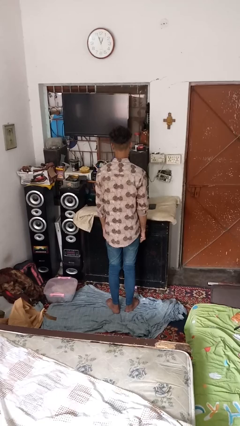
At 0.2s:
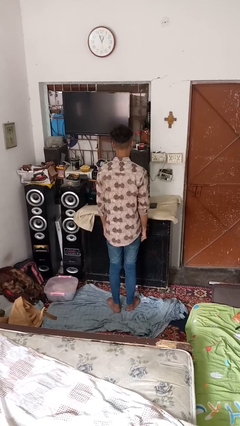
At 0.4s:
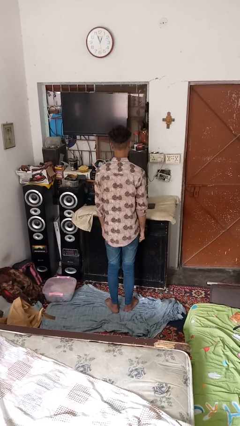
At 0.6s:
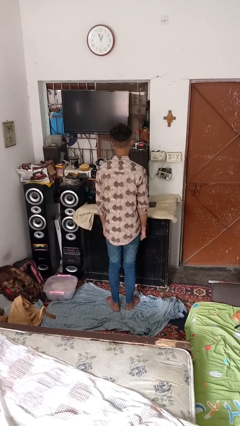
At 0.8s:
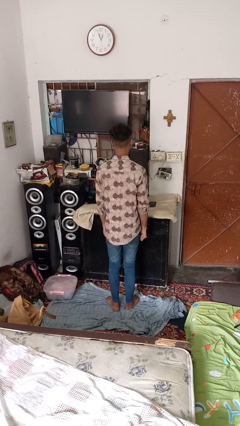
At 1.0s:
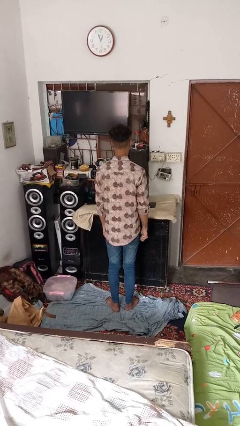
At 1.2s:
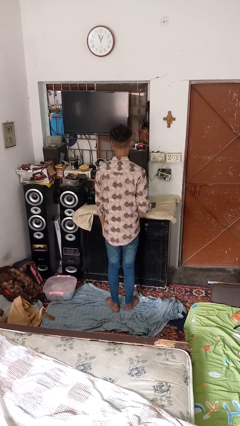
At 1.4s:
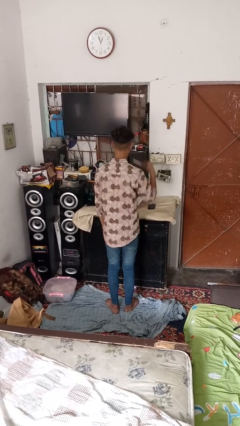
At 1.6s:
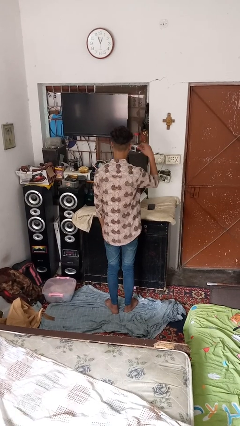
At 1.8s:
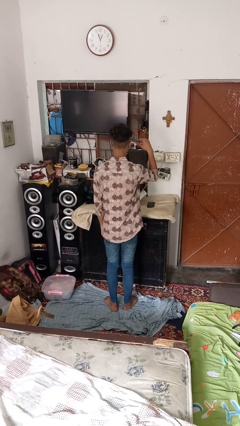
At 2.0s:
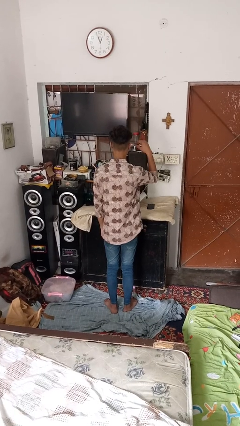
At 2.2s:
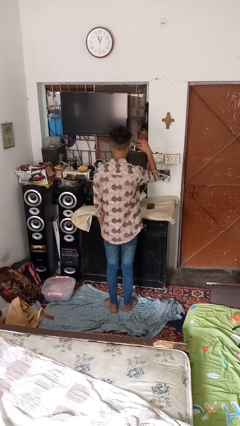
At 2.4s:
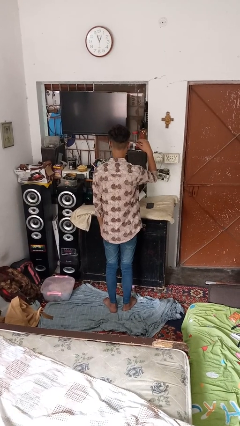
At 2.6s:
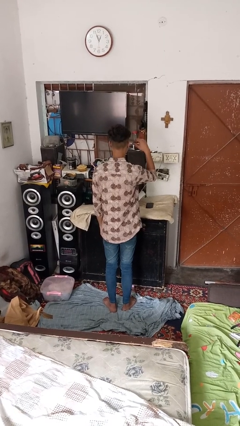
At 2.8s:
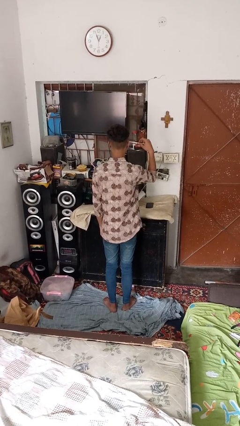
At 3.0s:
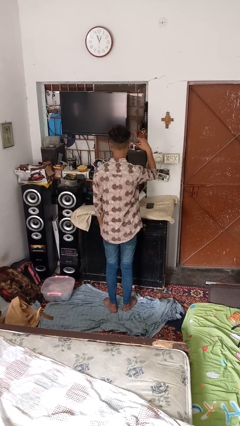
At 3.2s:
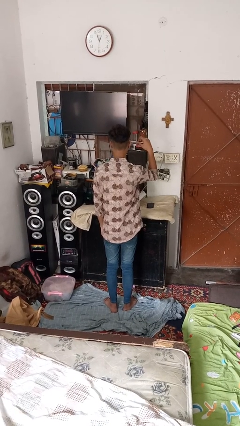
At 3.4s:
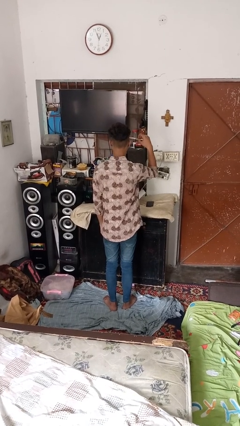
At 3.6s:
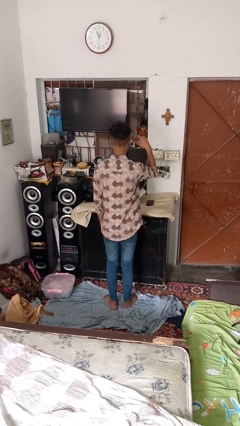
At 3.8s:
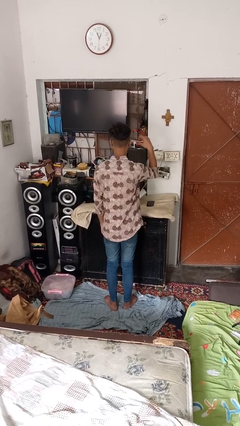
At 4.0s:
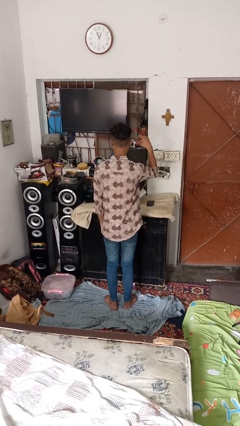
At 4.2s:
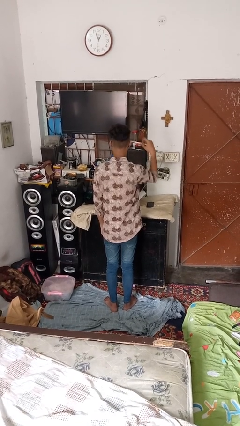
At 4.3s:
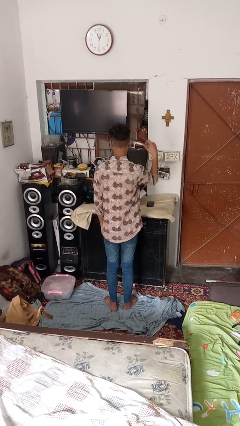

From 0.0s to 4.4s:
person applies eye makeup

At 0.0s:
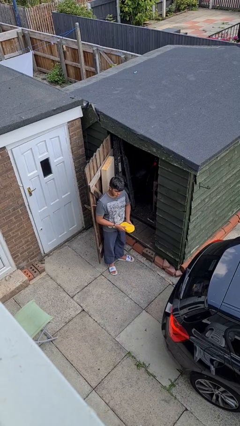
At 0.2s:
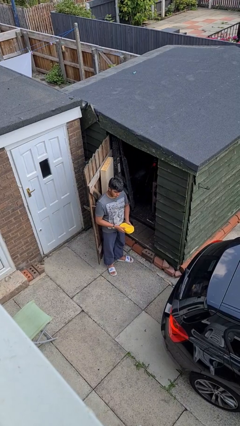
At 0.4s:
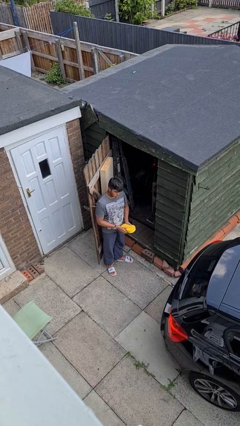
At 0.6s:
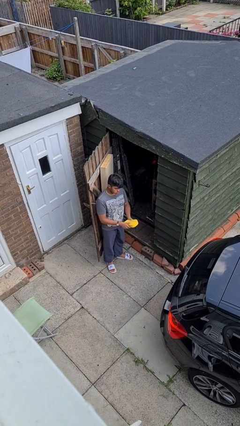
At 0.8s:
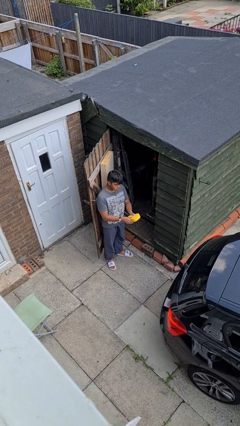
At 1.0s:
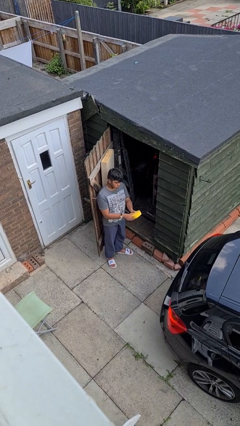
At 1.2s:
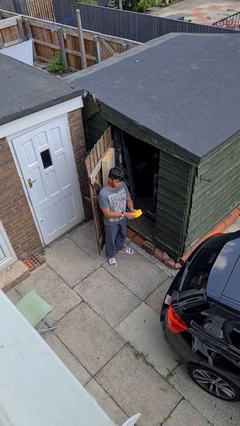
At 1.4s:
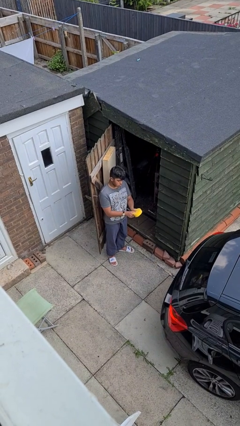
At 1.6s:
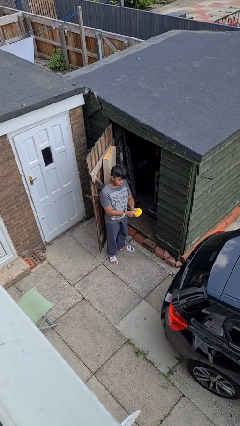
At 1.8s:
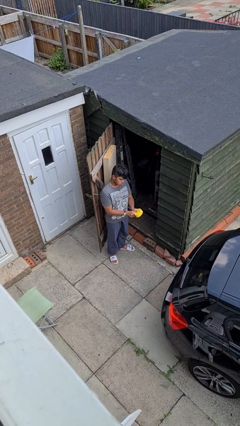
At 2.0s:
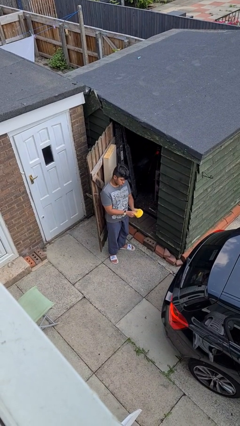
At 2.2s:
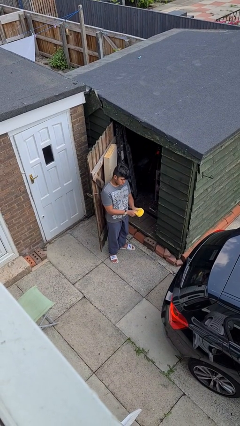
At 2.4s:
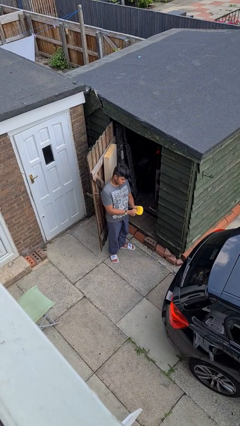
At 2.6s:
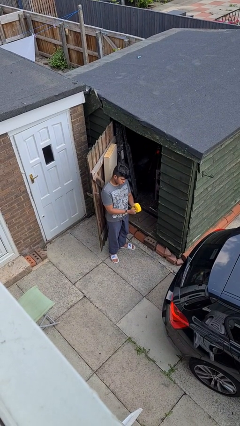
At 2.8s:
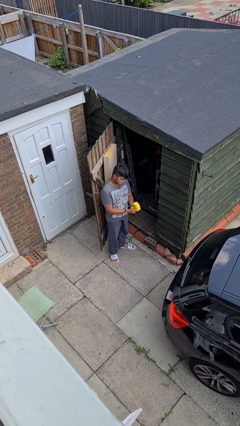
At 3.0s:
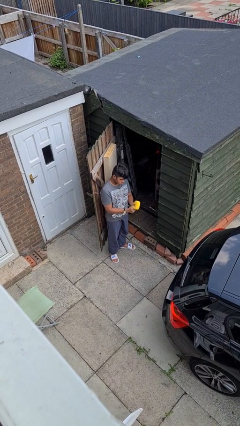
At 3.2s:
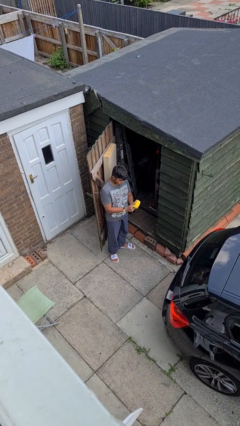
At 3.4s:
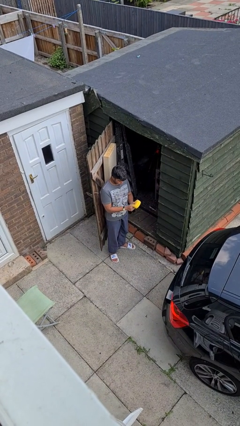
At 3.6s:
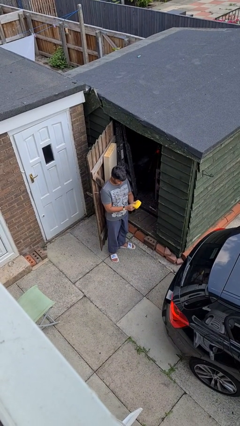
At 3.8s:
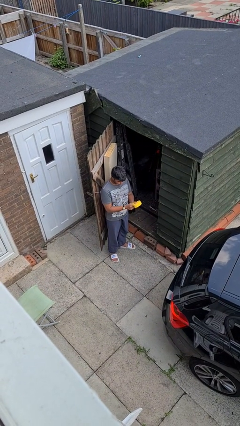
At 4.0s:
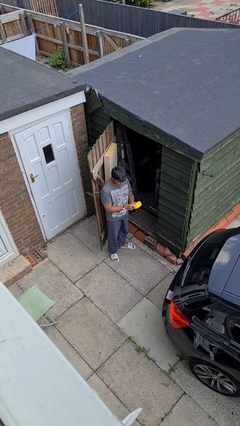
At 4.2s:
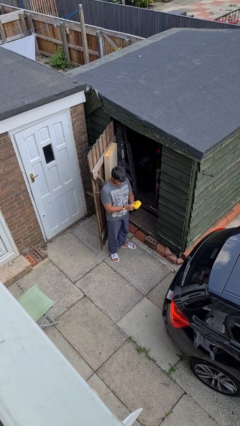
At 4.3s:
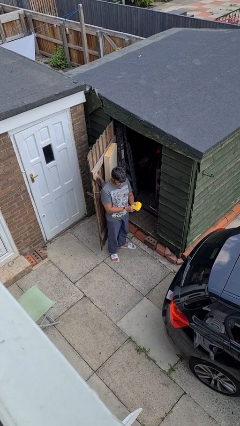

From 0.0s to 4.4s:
person squeezes object

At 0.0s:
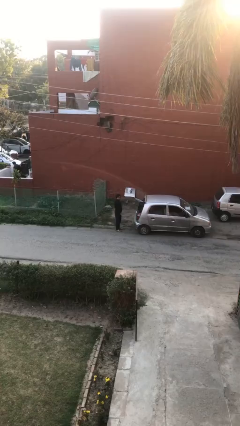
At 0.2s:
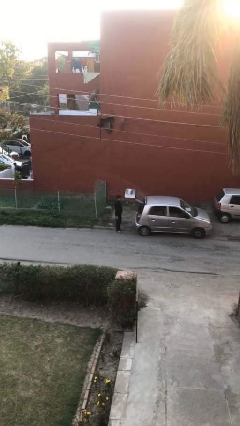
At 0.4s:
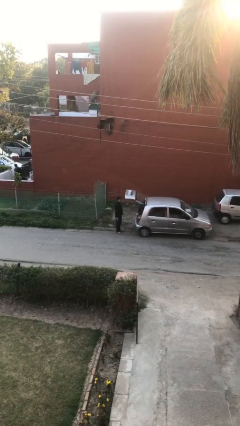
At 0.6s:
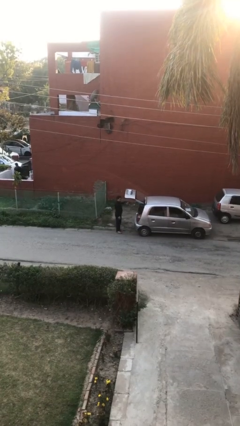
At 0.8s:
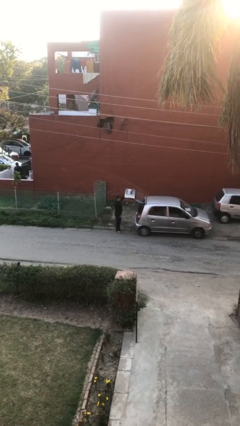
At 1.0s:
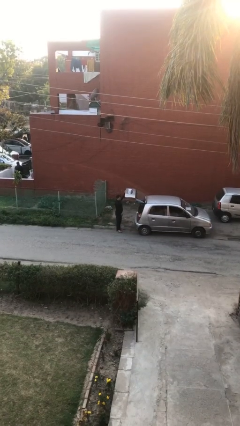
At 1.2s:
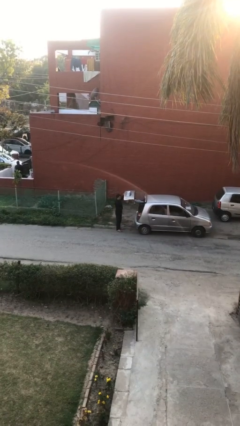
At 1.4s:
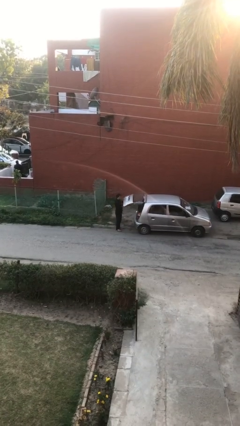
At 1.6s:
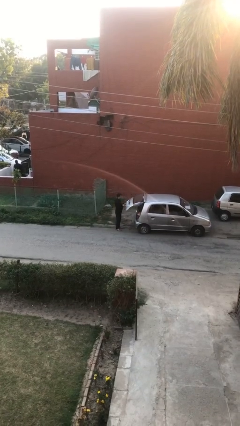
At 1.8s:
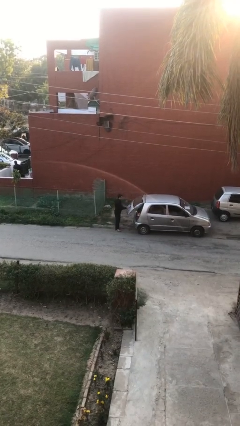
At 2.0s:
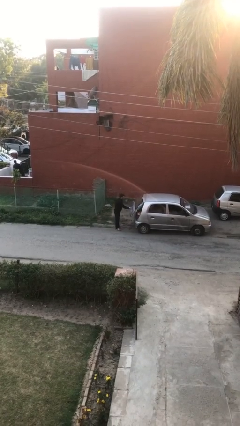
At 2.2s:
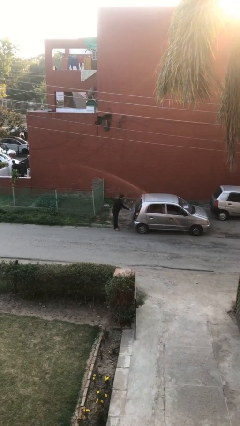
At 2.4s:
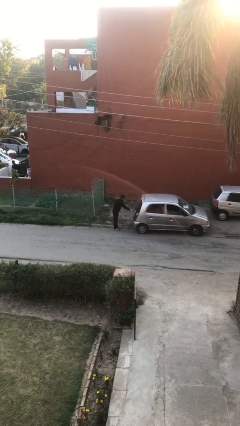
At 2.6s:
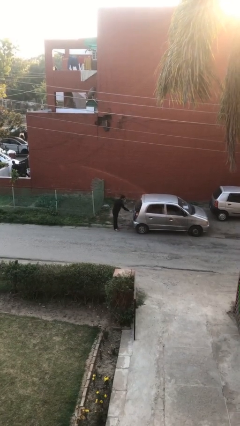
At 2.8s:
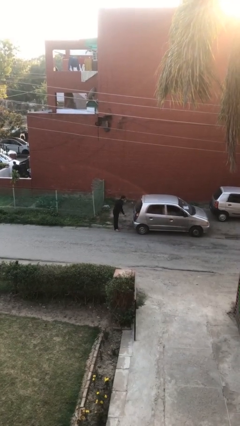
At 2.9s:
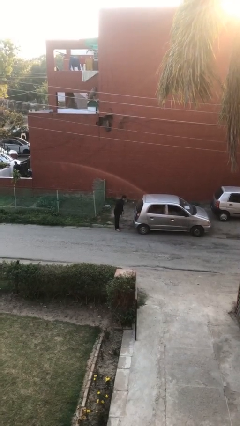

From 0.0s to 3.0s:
person closes car trunk

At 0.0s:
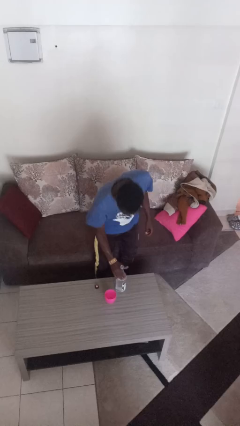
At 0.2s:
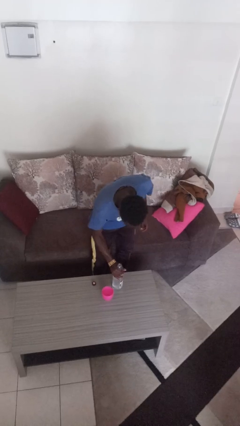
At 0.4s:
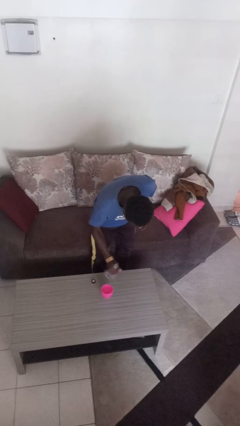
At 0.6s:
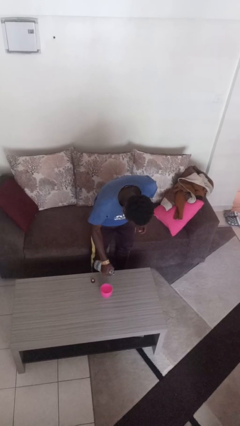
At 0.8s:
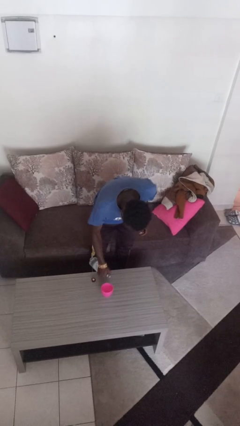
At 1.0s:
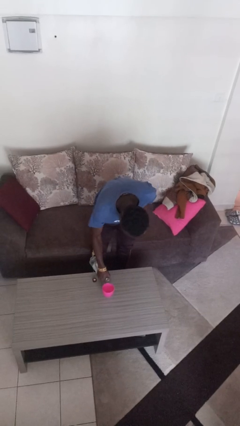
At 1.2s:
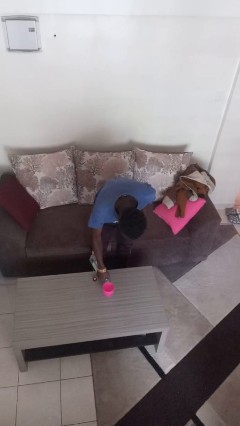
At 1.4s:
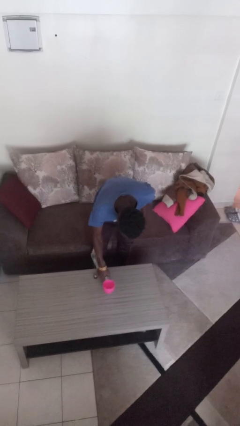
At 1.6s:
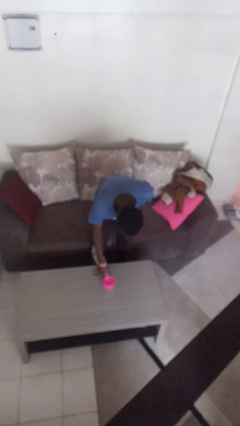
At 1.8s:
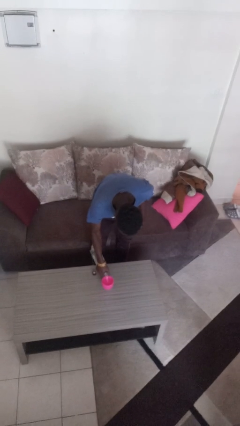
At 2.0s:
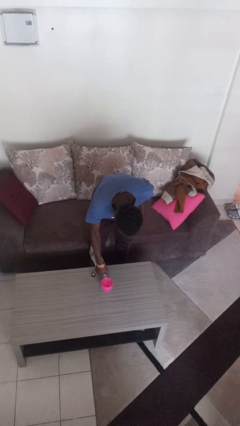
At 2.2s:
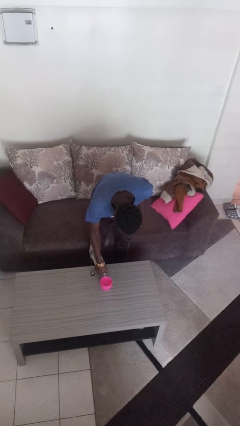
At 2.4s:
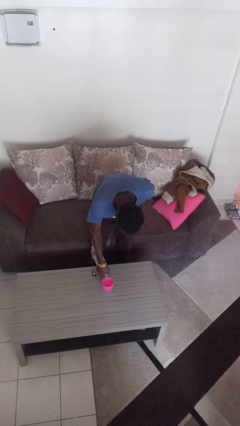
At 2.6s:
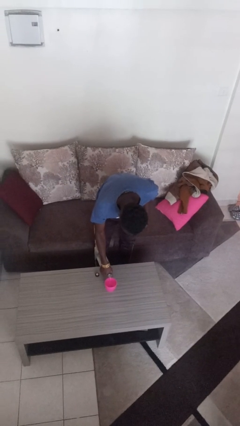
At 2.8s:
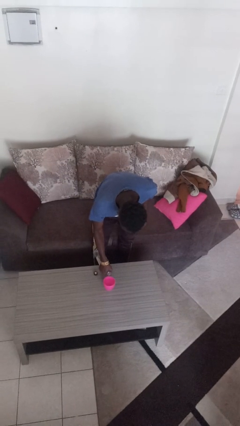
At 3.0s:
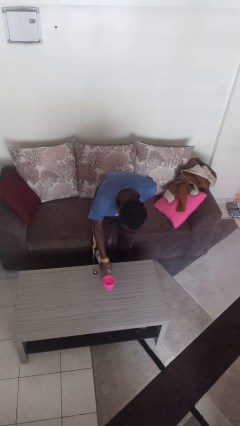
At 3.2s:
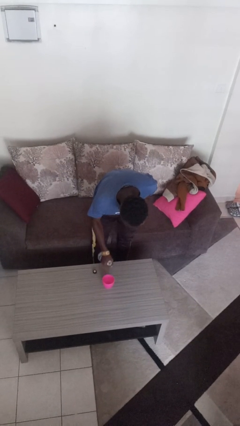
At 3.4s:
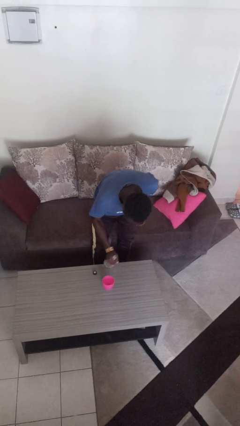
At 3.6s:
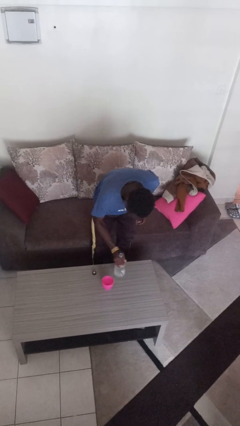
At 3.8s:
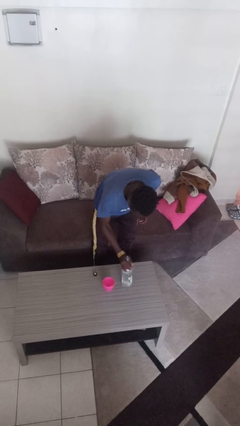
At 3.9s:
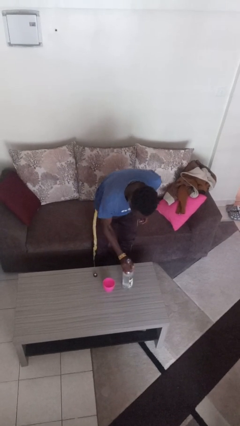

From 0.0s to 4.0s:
person pours liquid into cup

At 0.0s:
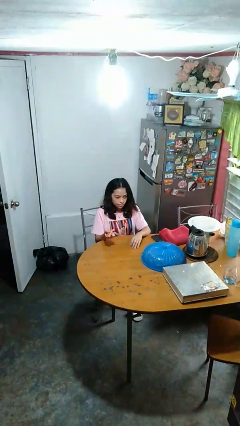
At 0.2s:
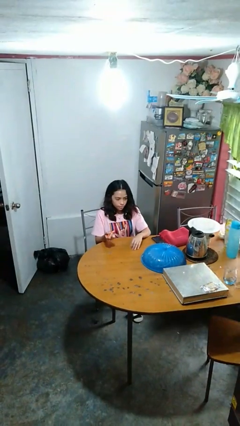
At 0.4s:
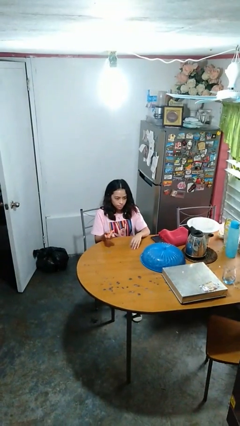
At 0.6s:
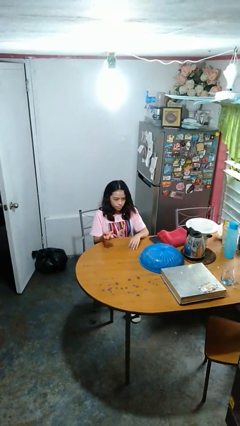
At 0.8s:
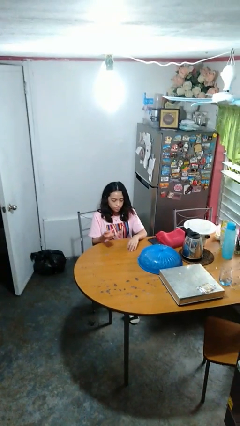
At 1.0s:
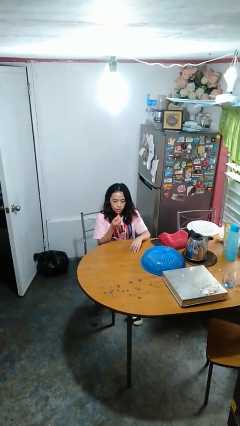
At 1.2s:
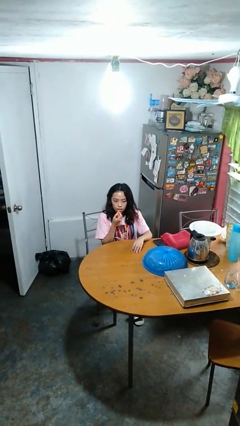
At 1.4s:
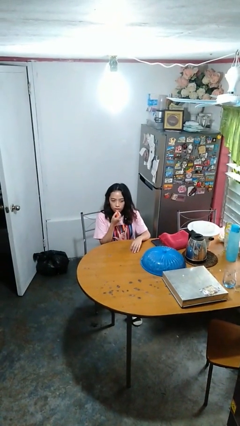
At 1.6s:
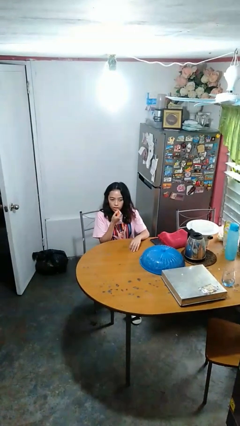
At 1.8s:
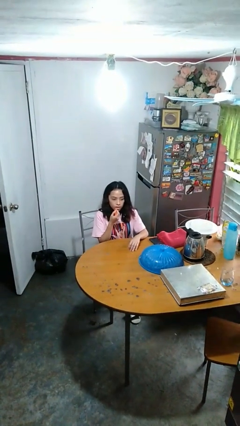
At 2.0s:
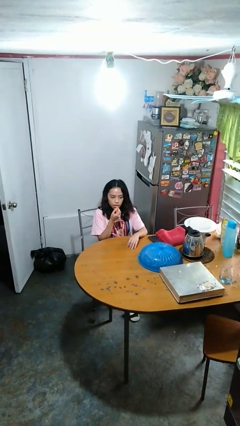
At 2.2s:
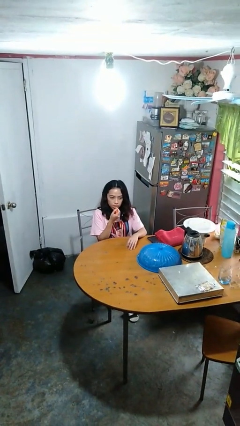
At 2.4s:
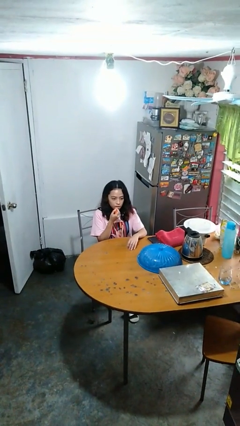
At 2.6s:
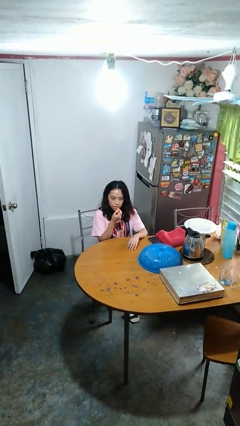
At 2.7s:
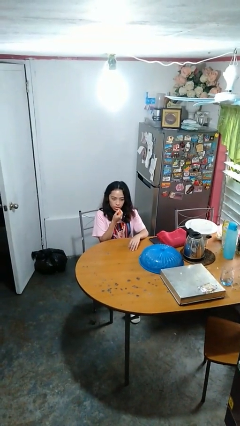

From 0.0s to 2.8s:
person applies lip makeup
